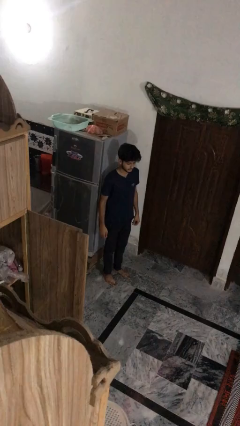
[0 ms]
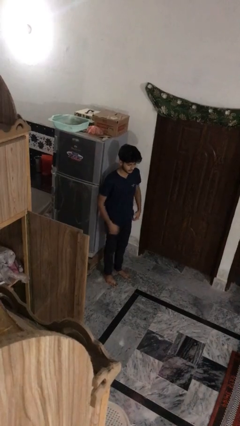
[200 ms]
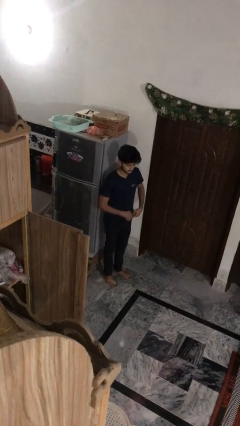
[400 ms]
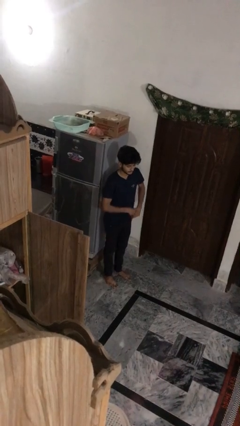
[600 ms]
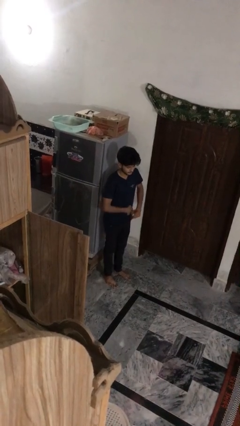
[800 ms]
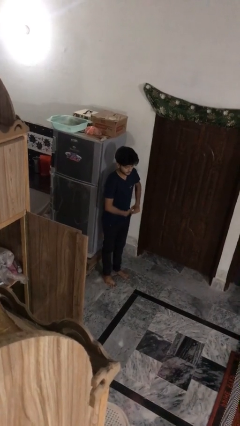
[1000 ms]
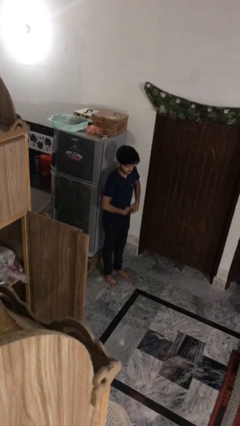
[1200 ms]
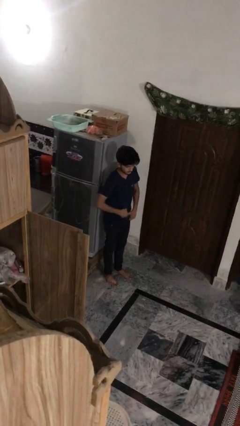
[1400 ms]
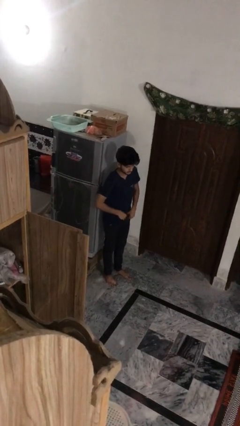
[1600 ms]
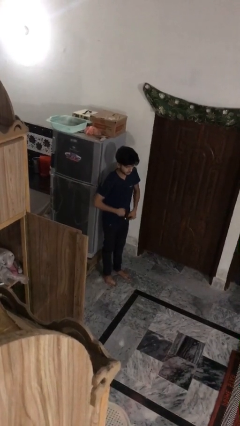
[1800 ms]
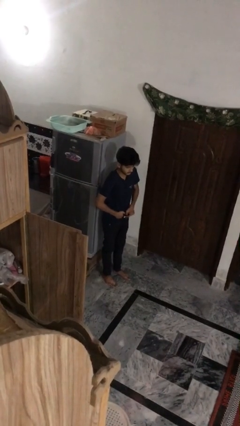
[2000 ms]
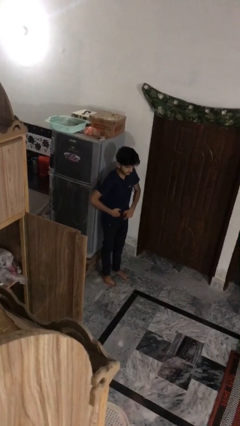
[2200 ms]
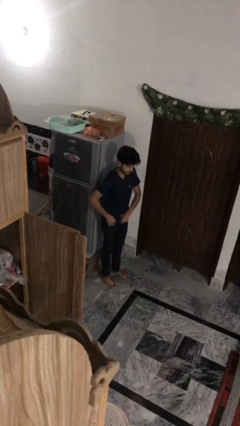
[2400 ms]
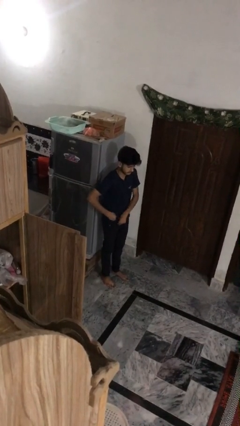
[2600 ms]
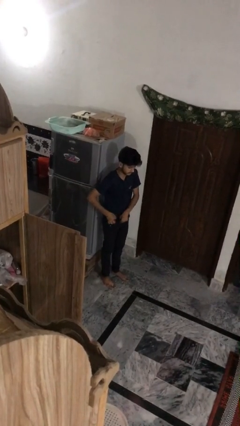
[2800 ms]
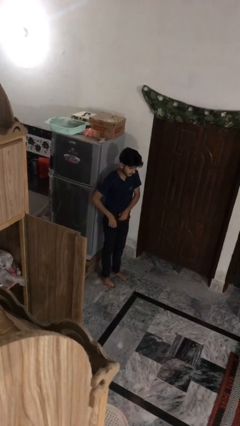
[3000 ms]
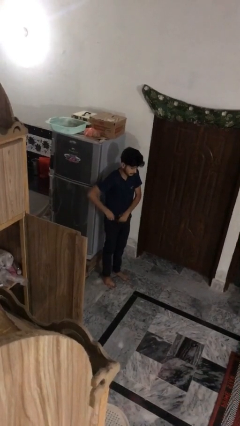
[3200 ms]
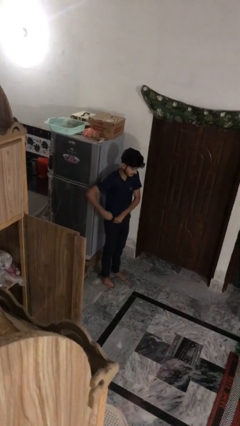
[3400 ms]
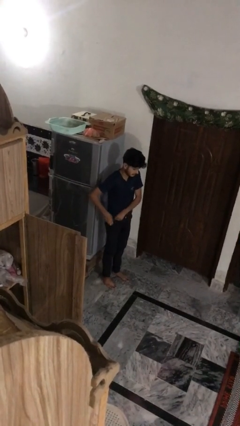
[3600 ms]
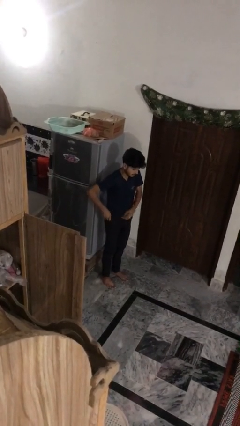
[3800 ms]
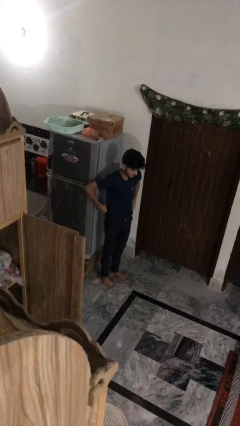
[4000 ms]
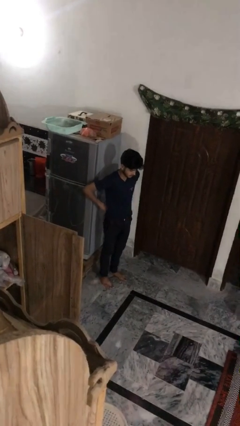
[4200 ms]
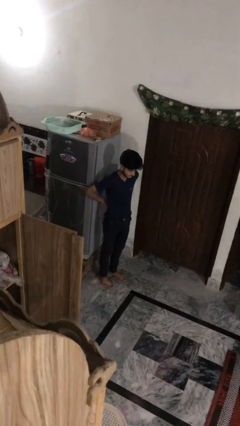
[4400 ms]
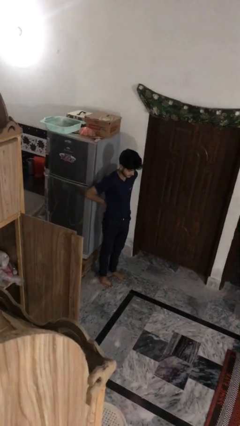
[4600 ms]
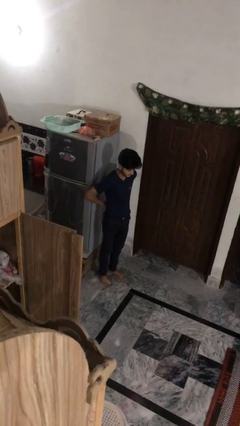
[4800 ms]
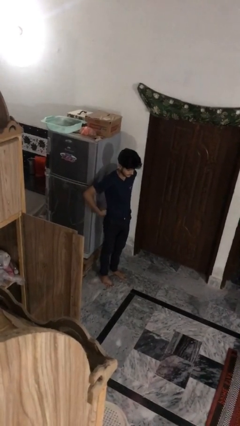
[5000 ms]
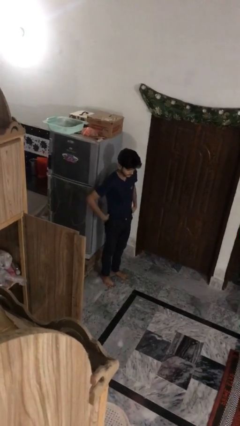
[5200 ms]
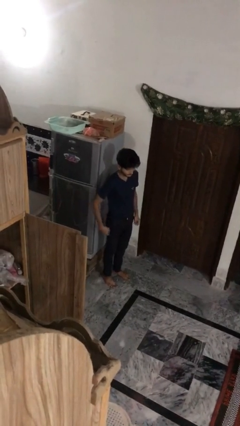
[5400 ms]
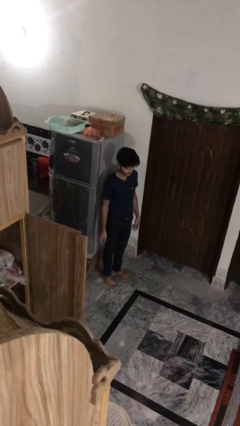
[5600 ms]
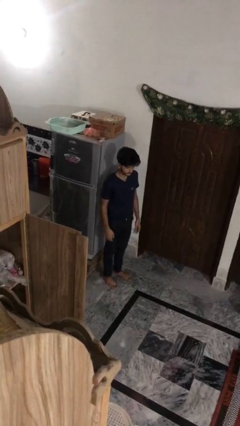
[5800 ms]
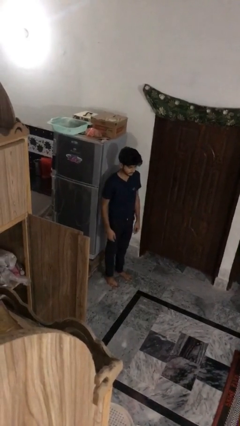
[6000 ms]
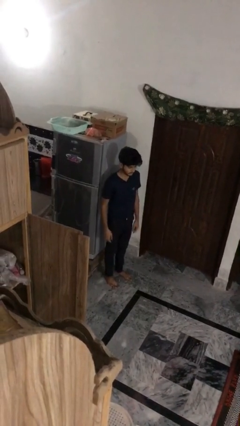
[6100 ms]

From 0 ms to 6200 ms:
person tucks in shirt

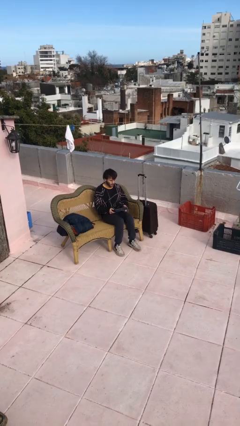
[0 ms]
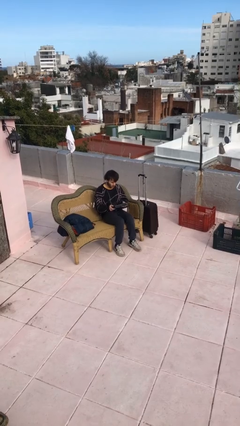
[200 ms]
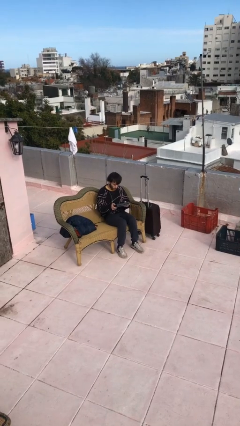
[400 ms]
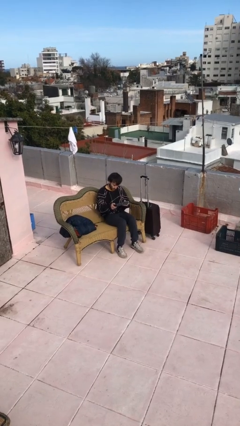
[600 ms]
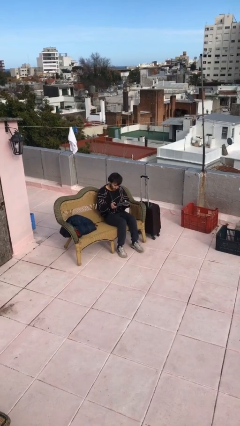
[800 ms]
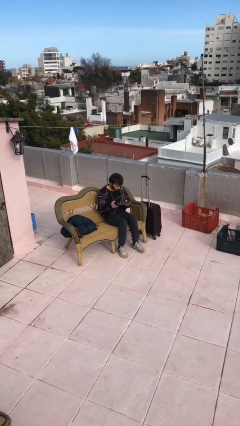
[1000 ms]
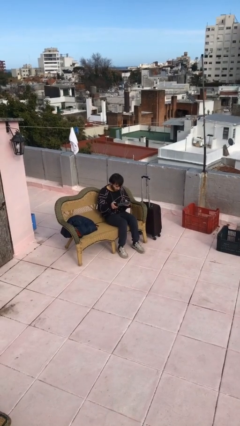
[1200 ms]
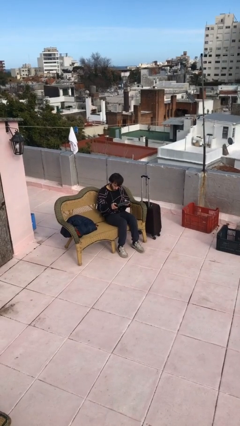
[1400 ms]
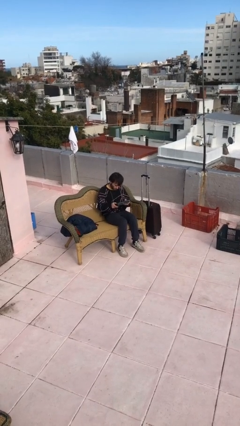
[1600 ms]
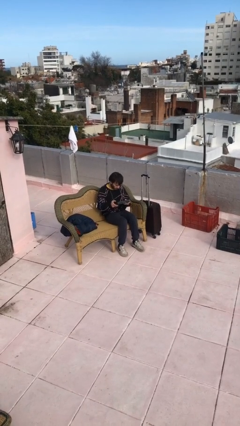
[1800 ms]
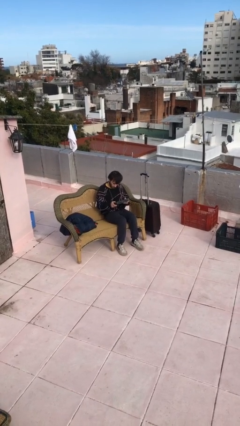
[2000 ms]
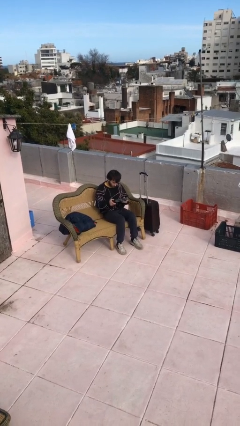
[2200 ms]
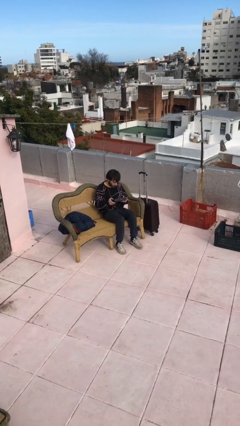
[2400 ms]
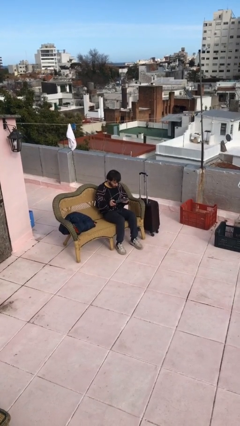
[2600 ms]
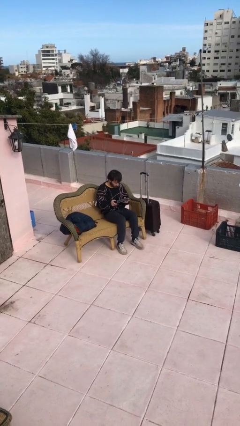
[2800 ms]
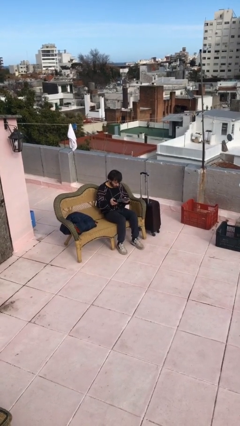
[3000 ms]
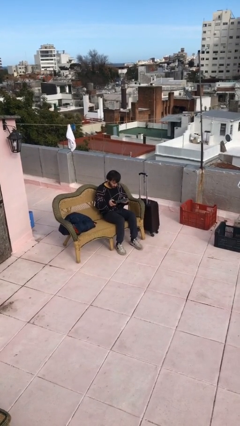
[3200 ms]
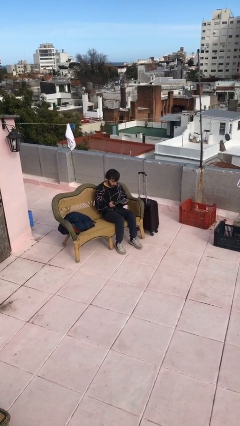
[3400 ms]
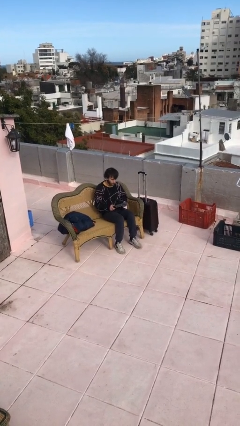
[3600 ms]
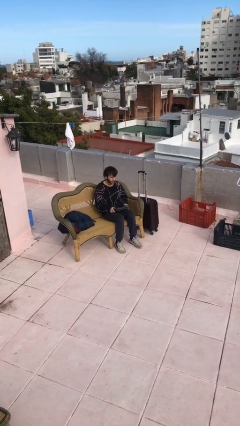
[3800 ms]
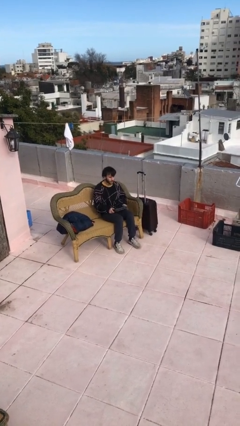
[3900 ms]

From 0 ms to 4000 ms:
person interacts with handheld game

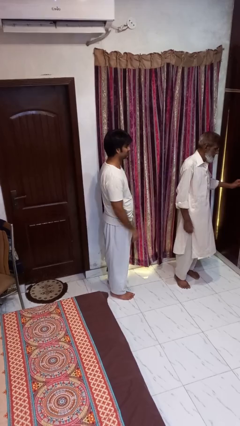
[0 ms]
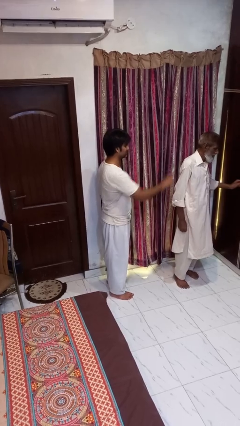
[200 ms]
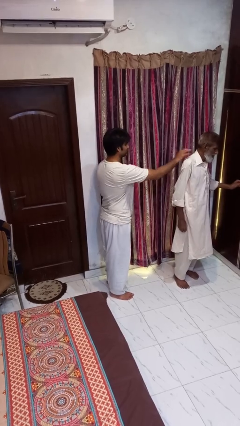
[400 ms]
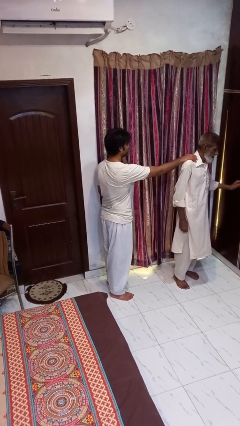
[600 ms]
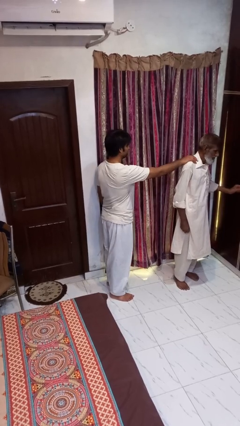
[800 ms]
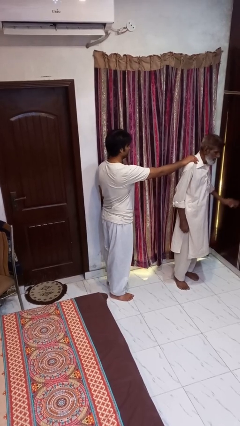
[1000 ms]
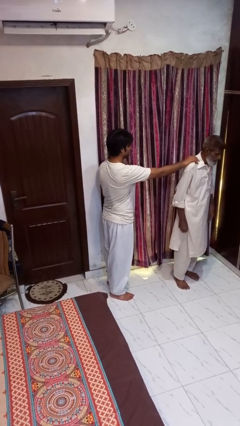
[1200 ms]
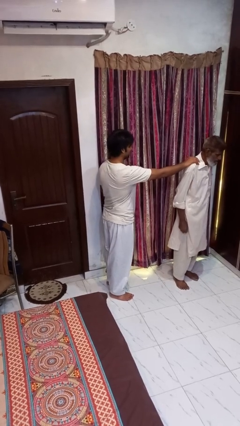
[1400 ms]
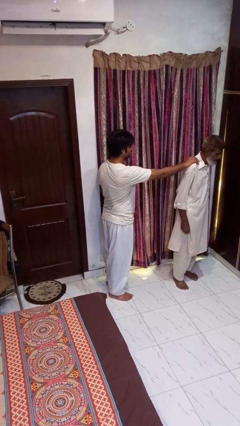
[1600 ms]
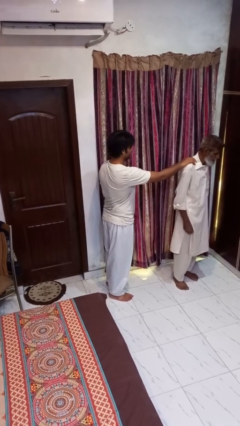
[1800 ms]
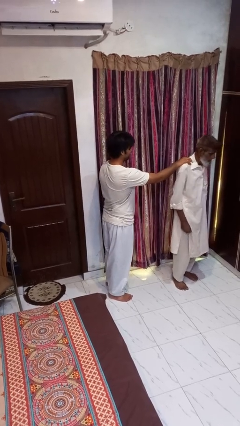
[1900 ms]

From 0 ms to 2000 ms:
person grabs person by shoulder

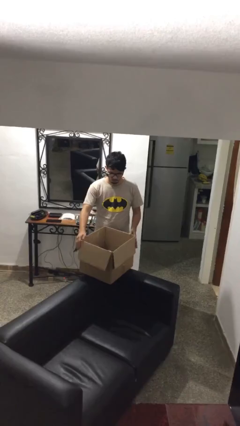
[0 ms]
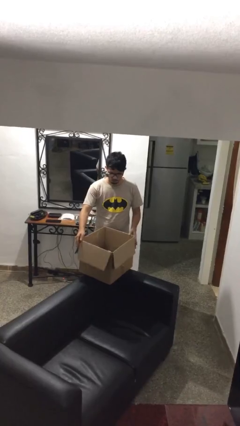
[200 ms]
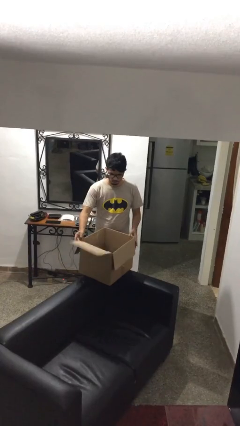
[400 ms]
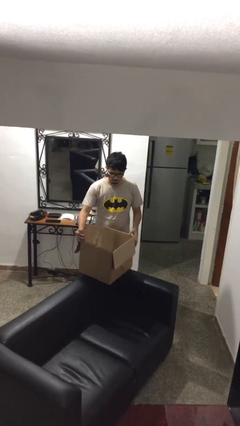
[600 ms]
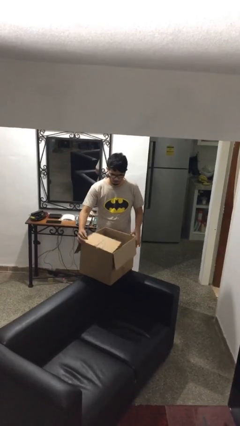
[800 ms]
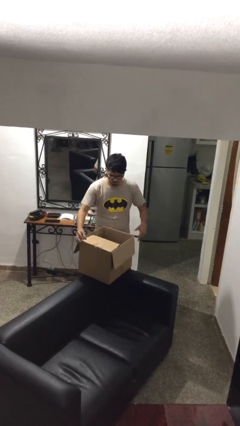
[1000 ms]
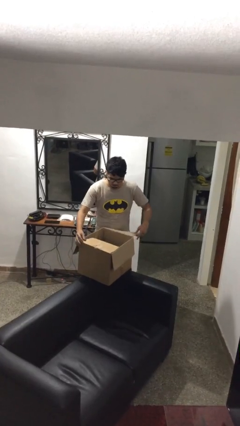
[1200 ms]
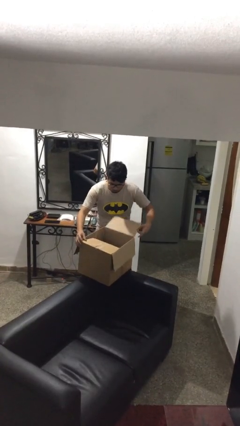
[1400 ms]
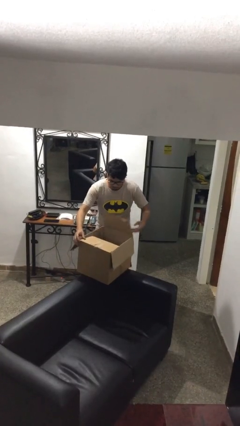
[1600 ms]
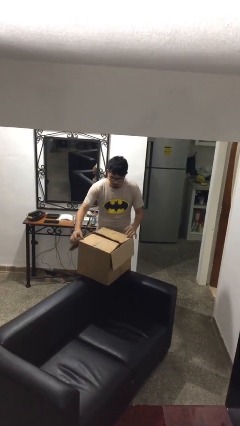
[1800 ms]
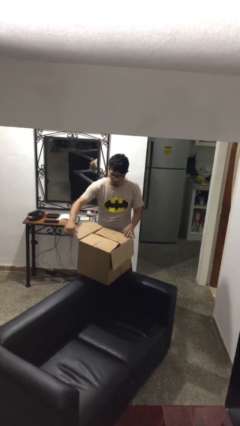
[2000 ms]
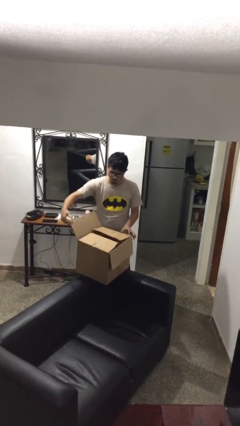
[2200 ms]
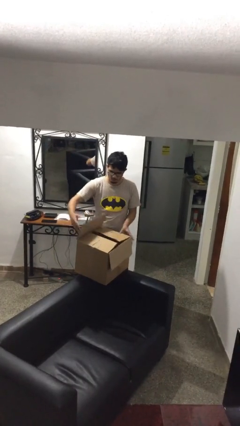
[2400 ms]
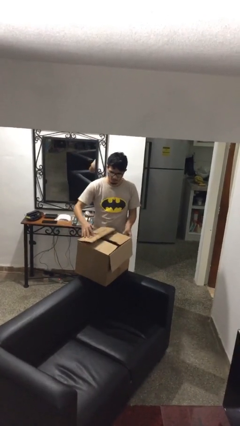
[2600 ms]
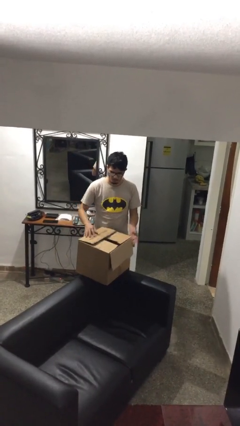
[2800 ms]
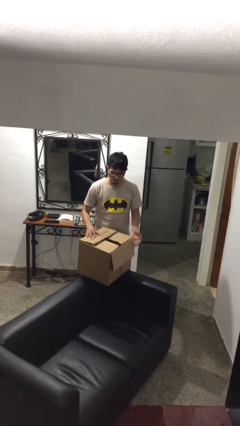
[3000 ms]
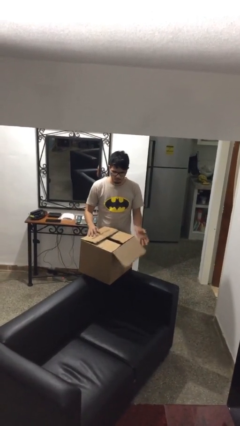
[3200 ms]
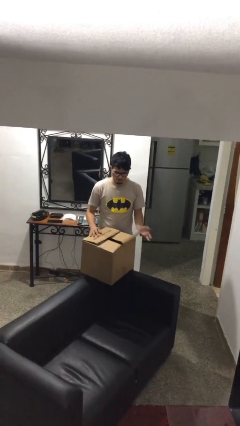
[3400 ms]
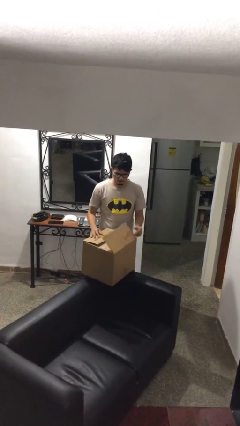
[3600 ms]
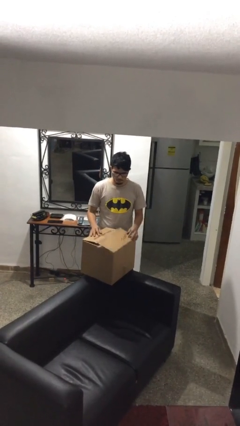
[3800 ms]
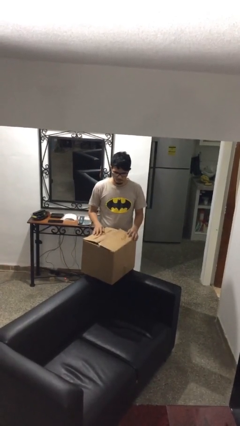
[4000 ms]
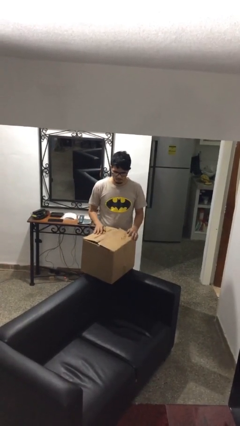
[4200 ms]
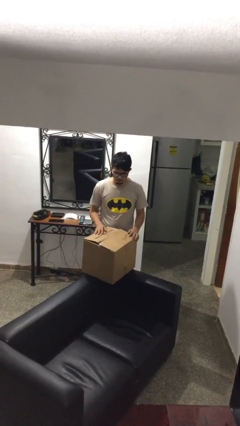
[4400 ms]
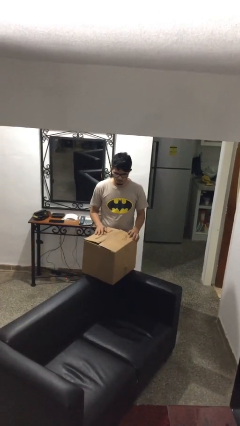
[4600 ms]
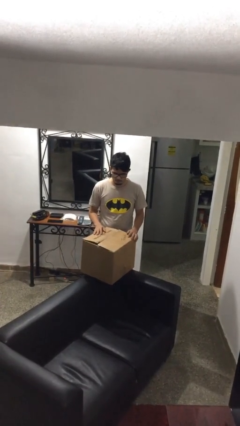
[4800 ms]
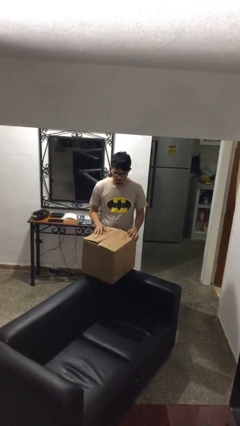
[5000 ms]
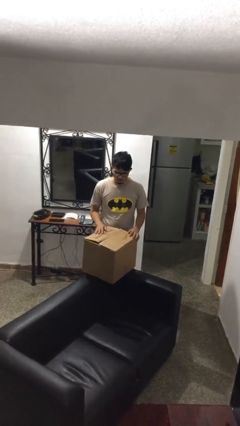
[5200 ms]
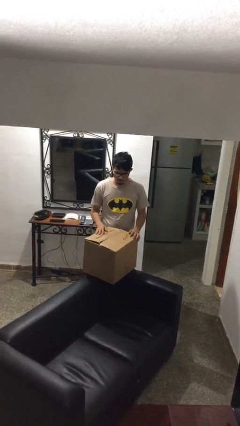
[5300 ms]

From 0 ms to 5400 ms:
person closes box

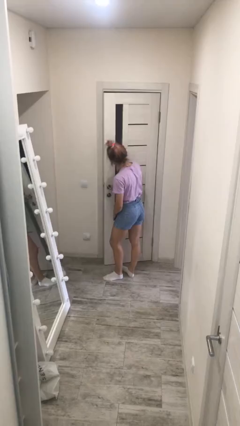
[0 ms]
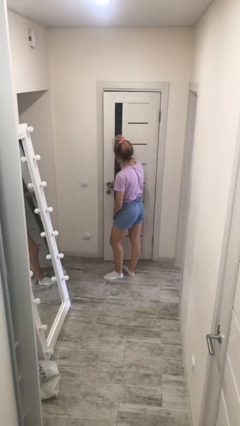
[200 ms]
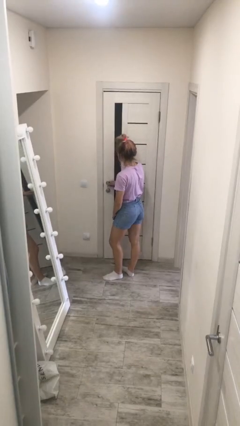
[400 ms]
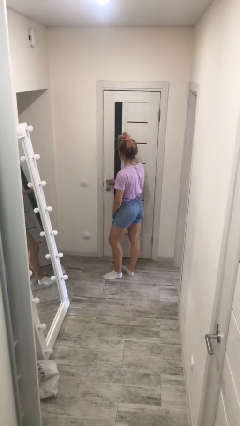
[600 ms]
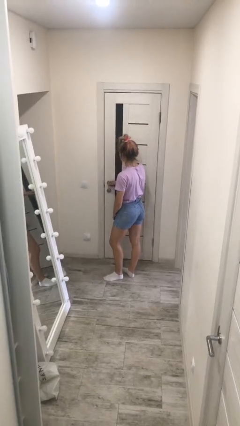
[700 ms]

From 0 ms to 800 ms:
person closes facility door
